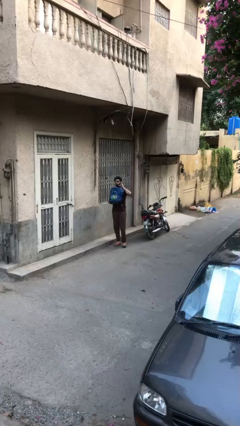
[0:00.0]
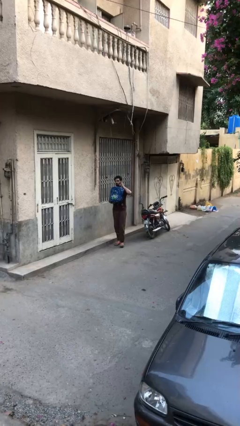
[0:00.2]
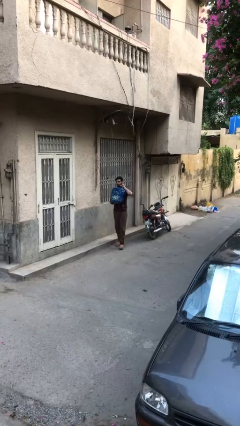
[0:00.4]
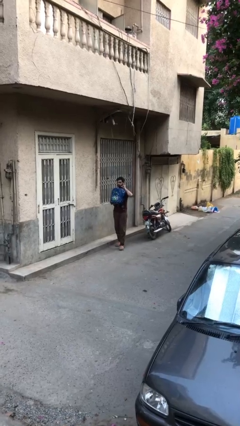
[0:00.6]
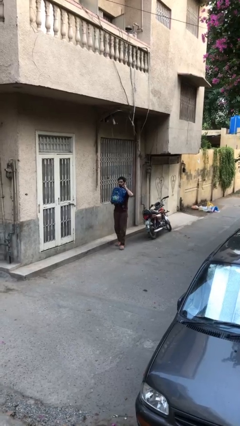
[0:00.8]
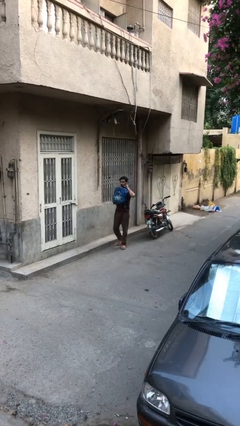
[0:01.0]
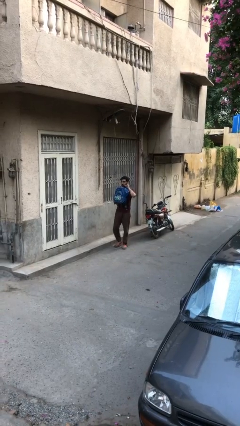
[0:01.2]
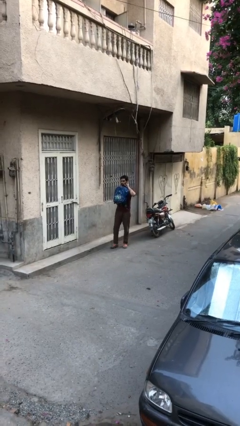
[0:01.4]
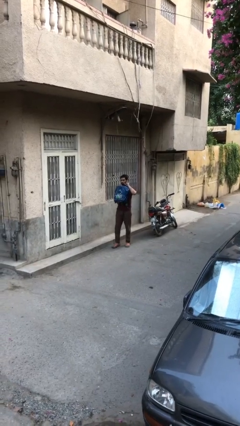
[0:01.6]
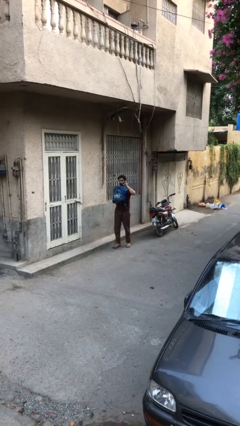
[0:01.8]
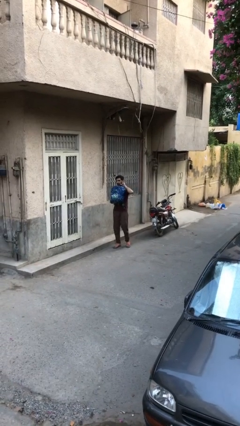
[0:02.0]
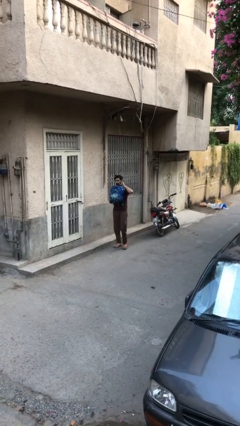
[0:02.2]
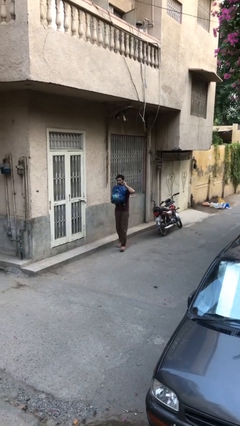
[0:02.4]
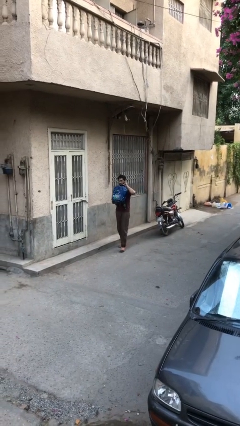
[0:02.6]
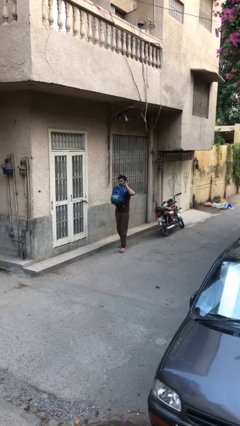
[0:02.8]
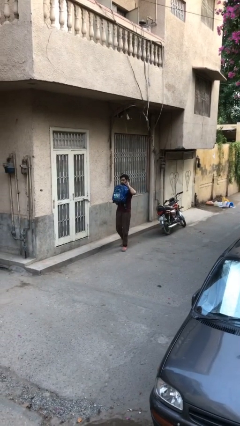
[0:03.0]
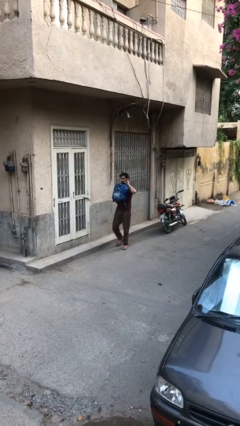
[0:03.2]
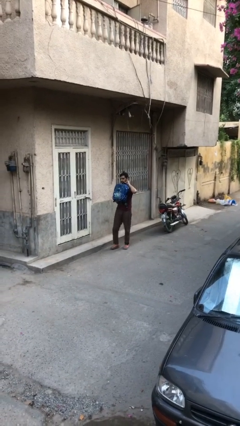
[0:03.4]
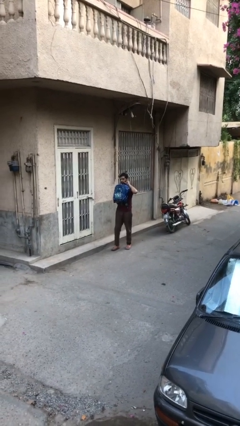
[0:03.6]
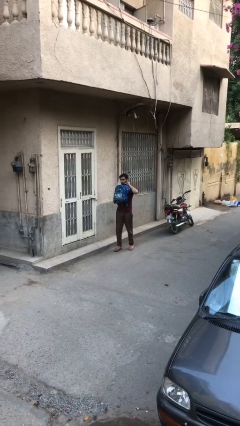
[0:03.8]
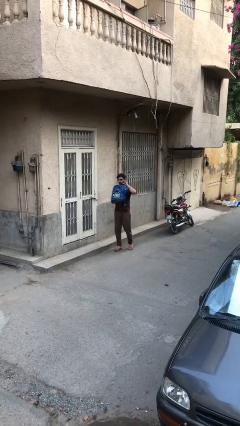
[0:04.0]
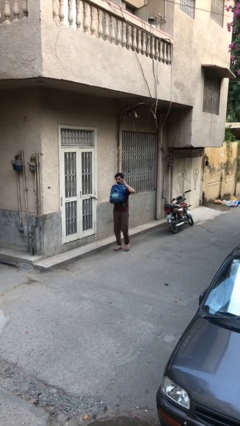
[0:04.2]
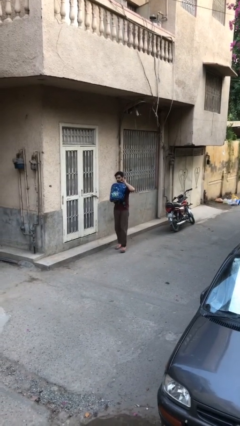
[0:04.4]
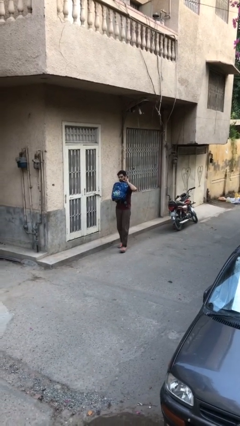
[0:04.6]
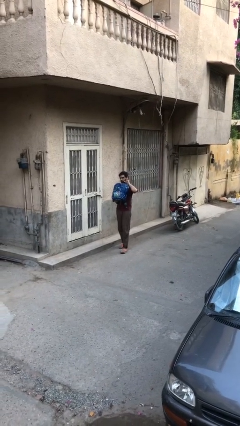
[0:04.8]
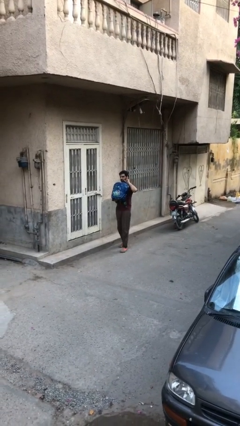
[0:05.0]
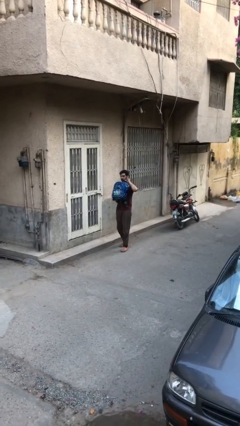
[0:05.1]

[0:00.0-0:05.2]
person carries heavy object

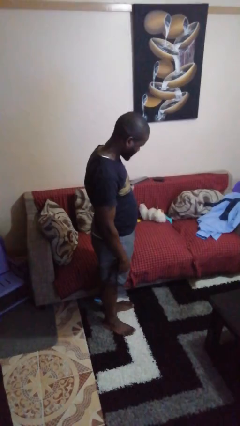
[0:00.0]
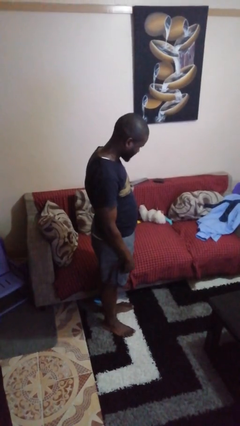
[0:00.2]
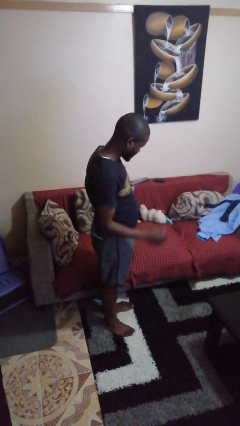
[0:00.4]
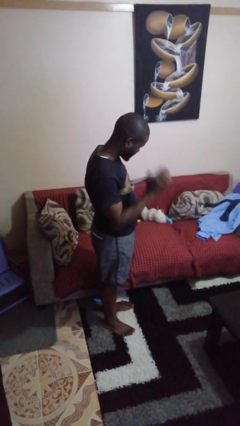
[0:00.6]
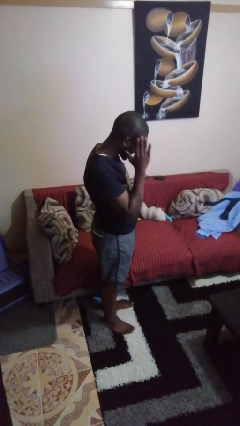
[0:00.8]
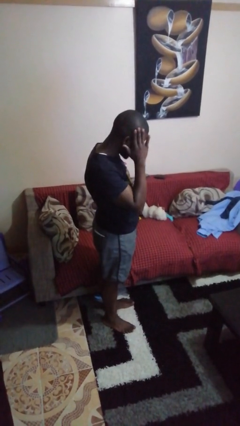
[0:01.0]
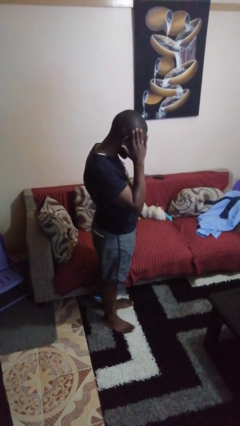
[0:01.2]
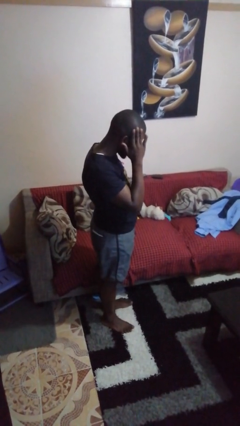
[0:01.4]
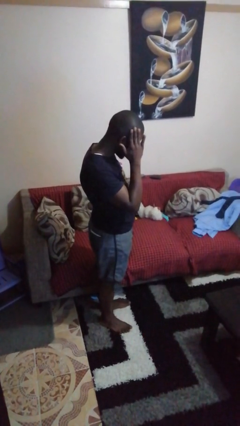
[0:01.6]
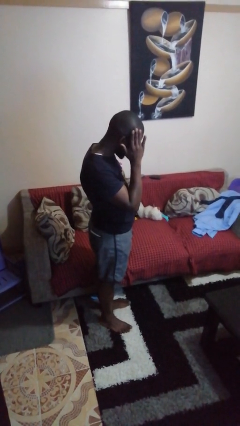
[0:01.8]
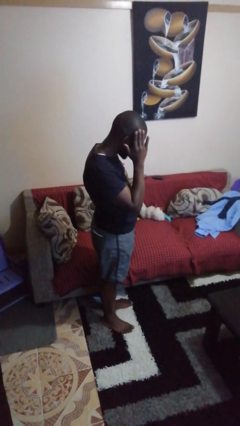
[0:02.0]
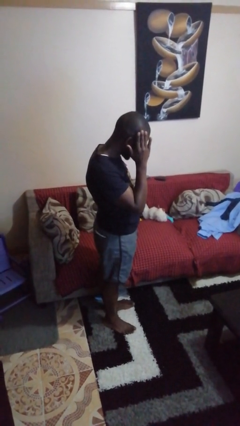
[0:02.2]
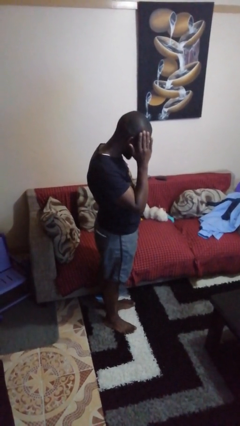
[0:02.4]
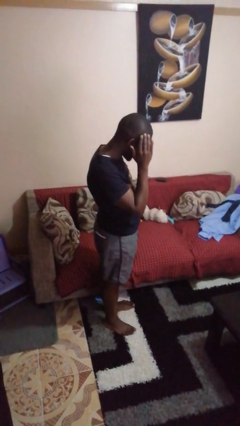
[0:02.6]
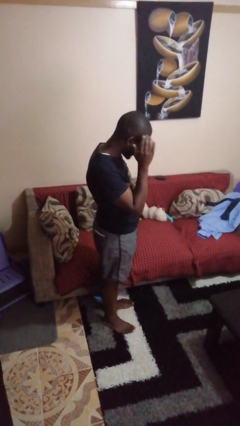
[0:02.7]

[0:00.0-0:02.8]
person pats head

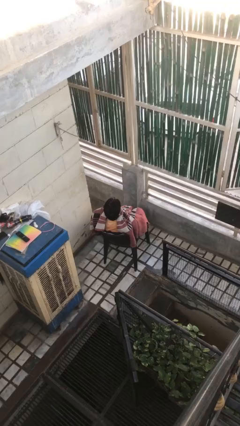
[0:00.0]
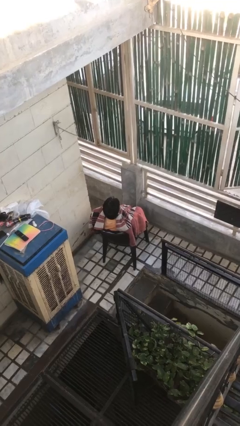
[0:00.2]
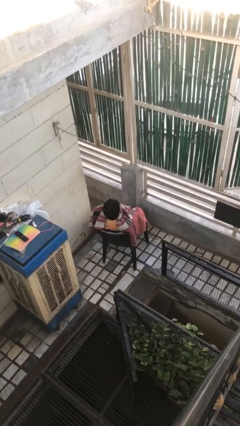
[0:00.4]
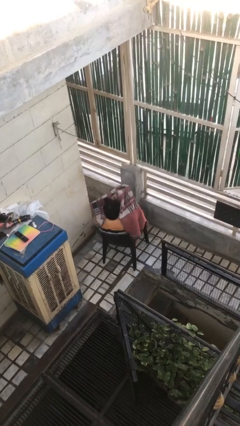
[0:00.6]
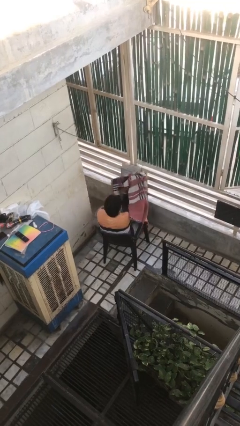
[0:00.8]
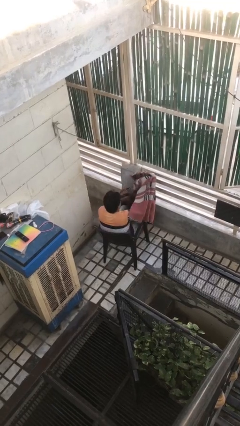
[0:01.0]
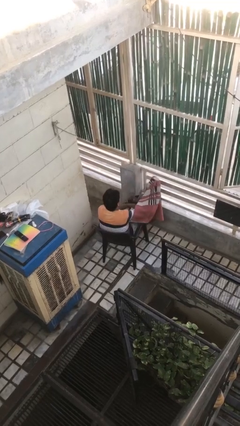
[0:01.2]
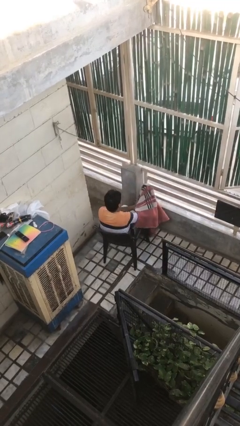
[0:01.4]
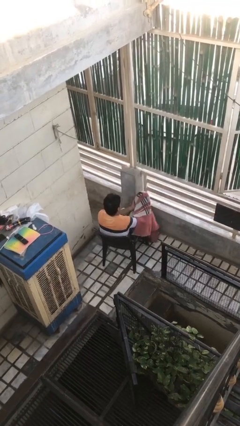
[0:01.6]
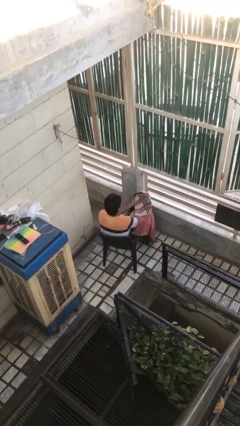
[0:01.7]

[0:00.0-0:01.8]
person uncovers with blanket

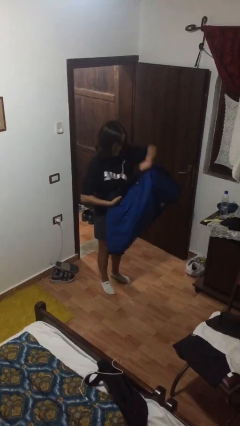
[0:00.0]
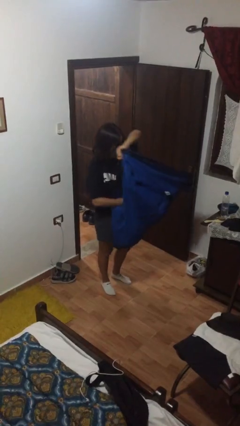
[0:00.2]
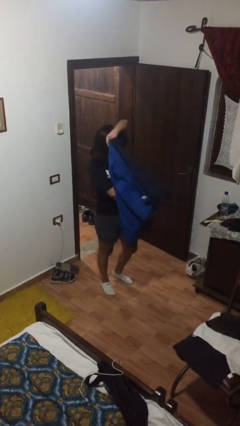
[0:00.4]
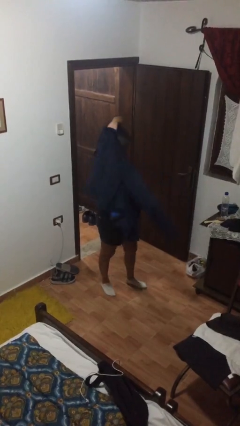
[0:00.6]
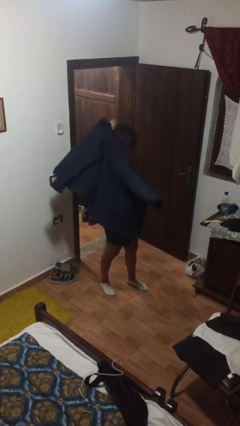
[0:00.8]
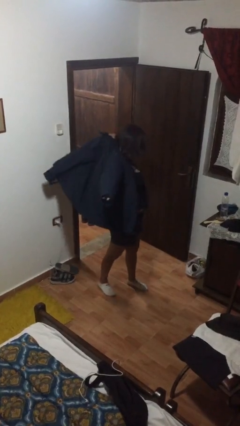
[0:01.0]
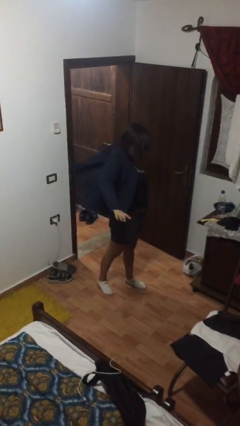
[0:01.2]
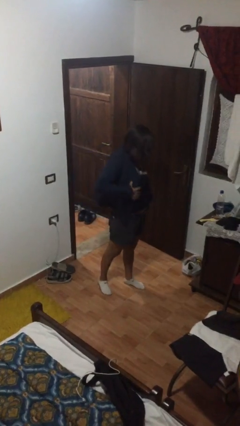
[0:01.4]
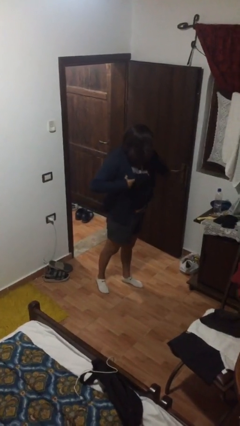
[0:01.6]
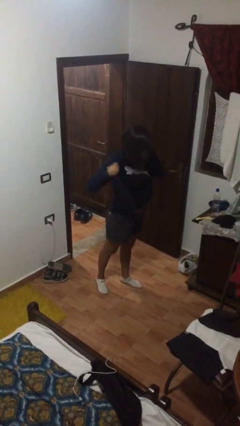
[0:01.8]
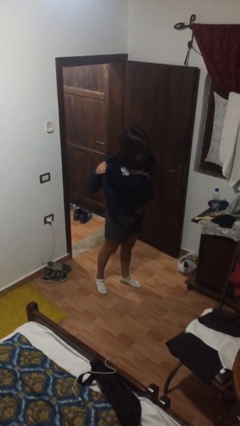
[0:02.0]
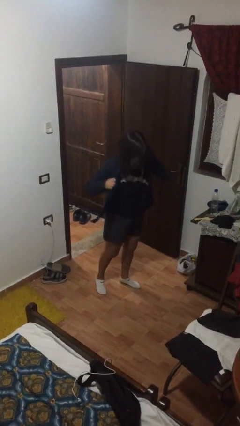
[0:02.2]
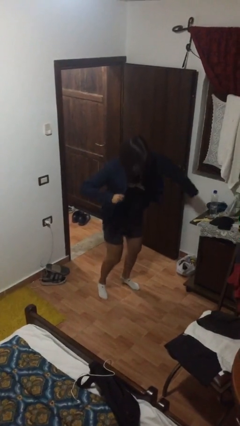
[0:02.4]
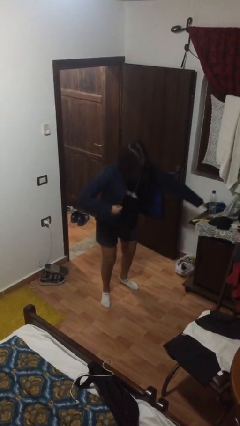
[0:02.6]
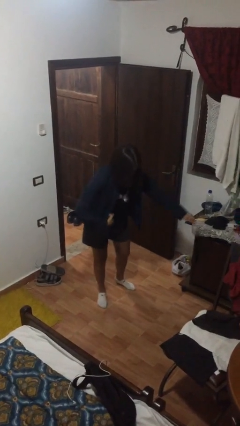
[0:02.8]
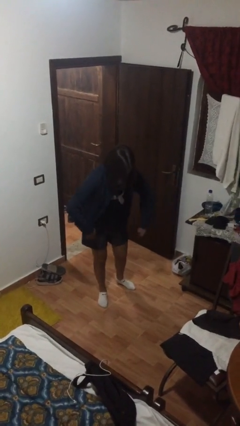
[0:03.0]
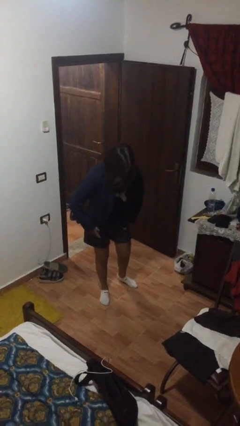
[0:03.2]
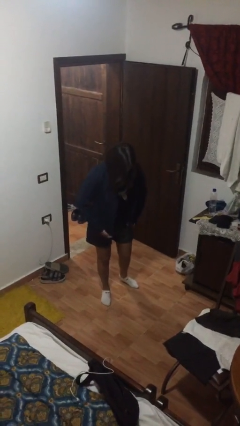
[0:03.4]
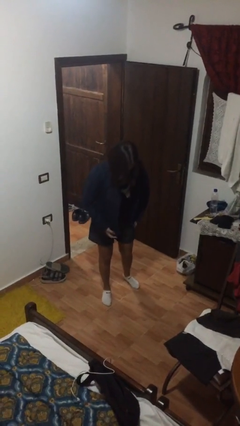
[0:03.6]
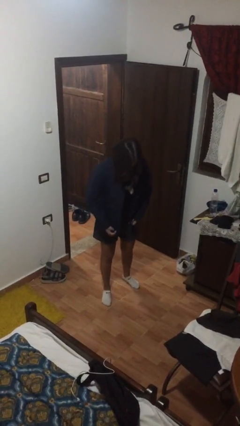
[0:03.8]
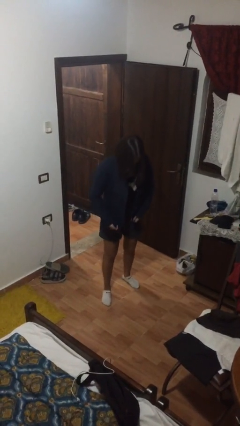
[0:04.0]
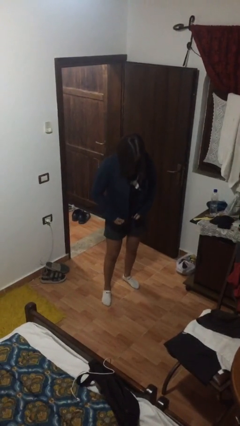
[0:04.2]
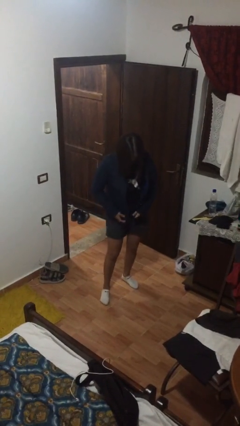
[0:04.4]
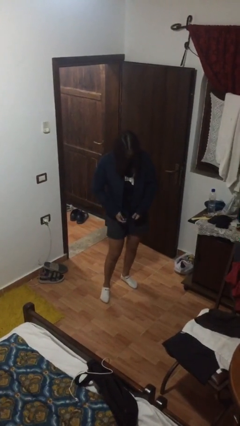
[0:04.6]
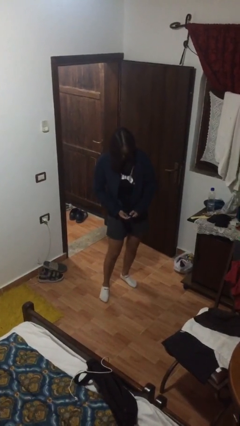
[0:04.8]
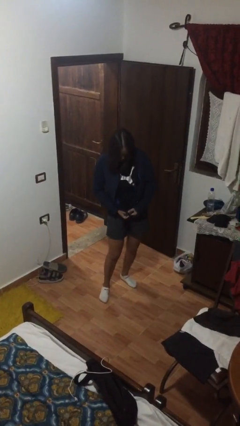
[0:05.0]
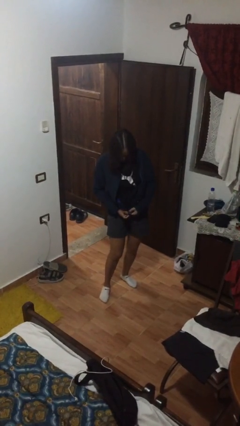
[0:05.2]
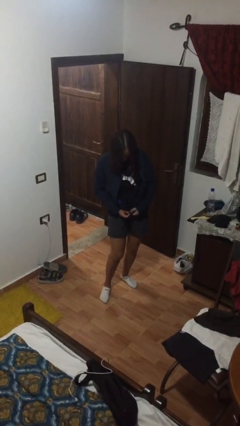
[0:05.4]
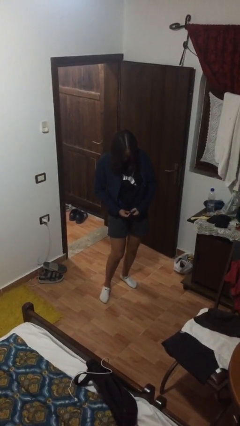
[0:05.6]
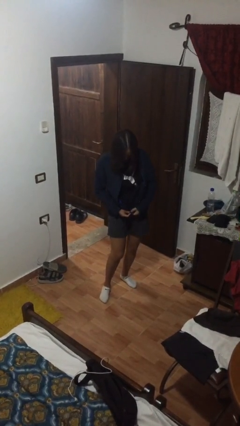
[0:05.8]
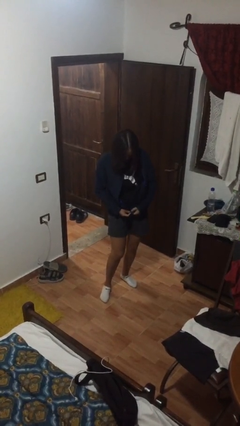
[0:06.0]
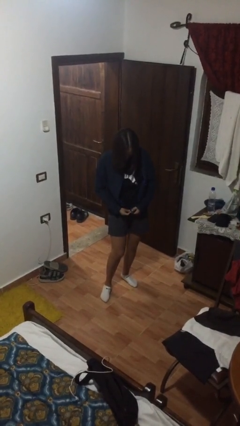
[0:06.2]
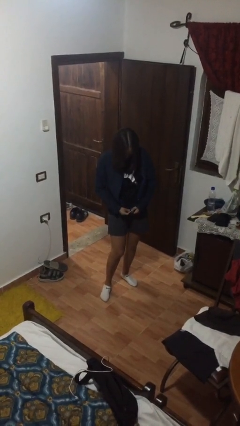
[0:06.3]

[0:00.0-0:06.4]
person puts on jacket

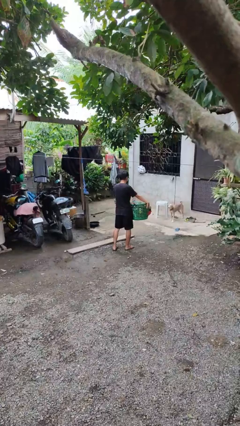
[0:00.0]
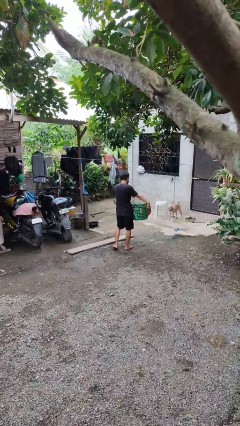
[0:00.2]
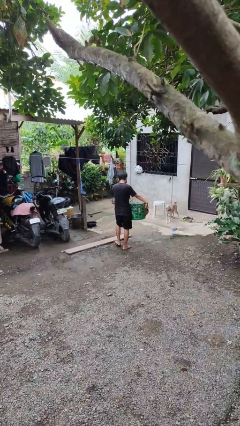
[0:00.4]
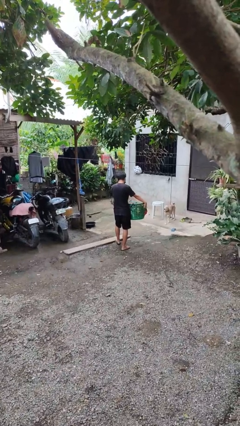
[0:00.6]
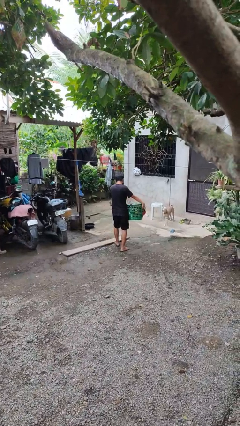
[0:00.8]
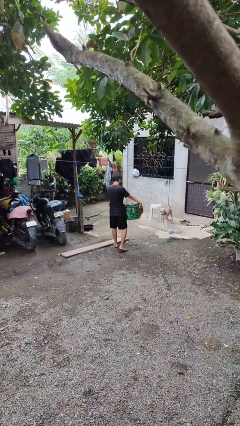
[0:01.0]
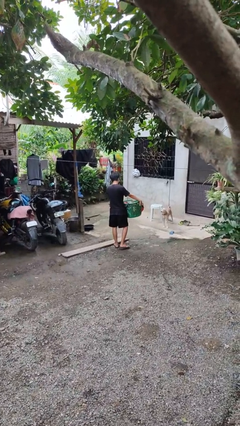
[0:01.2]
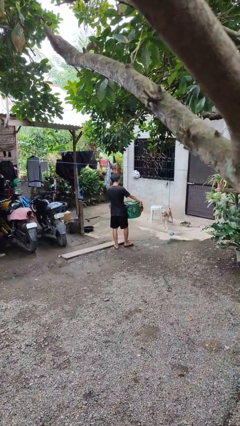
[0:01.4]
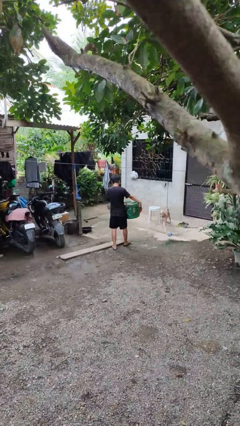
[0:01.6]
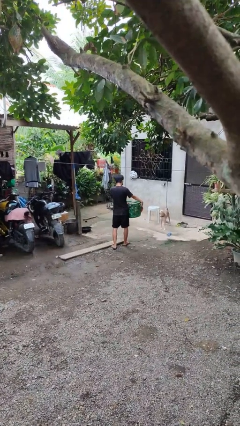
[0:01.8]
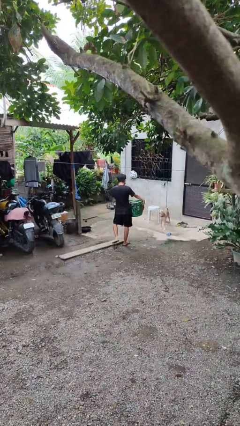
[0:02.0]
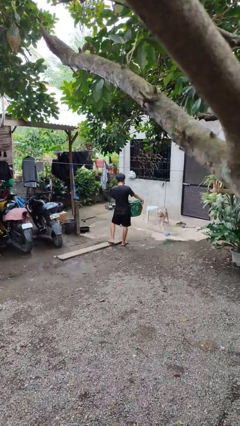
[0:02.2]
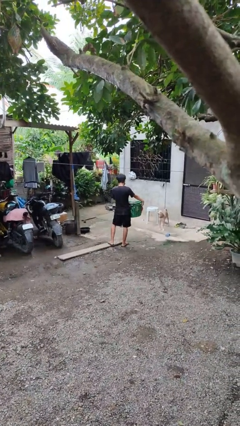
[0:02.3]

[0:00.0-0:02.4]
person carries laundry basket
